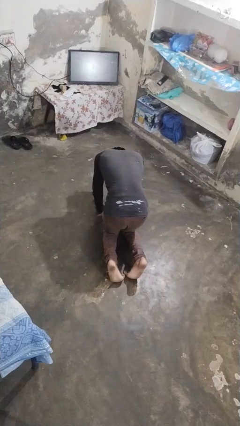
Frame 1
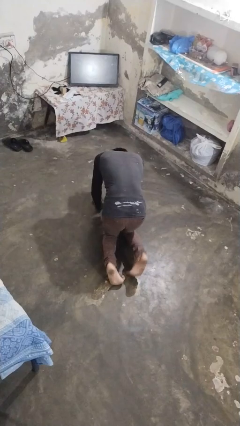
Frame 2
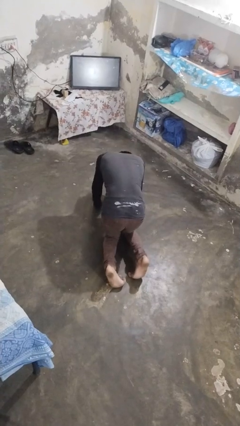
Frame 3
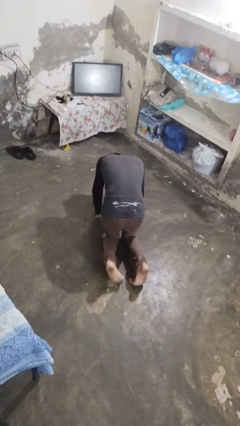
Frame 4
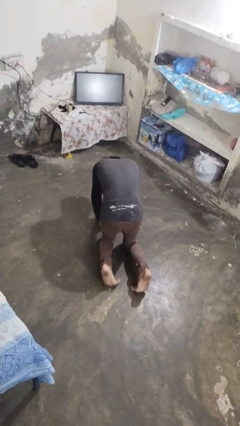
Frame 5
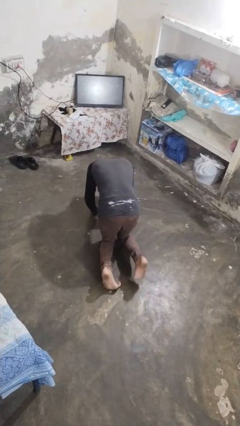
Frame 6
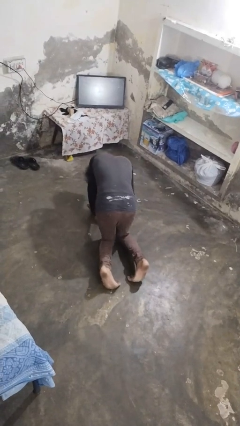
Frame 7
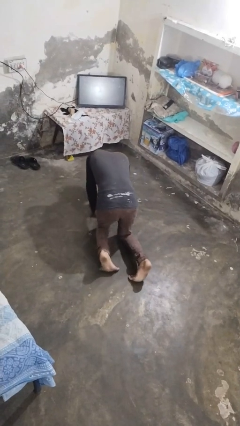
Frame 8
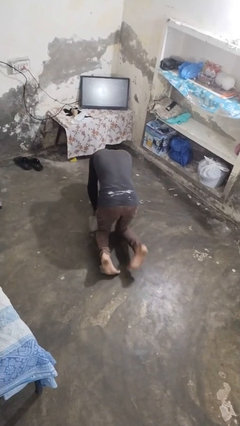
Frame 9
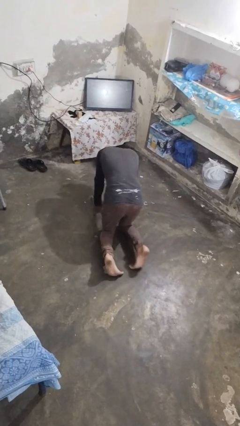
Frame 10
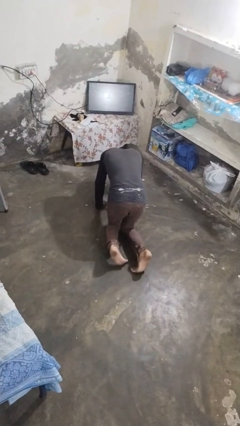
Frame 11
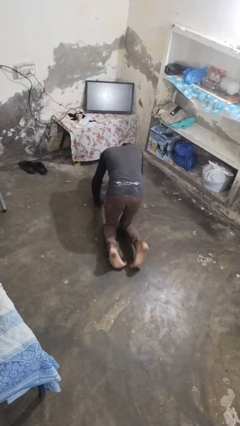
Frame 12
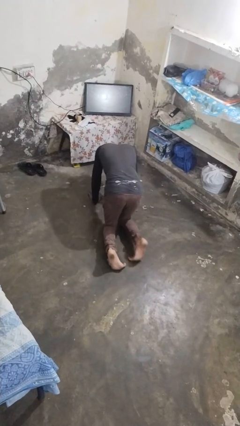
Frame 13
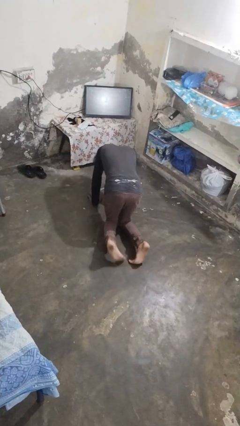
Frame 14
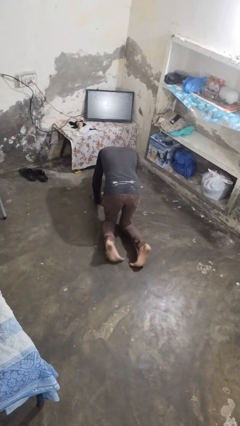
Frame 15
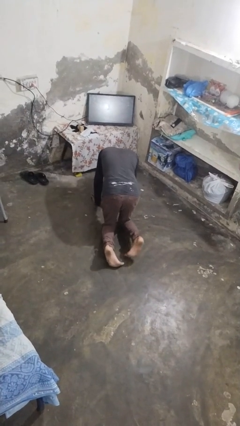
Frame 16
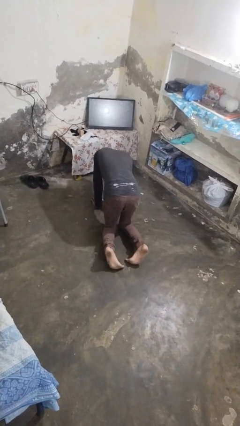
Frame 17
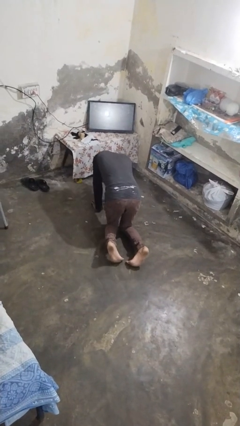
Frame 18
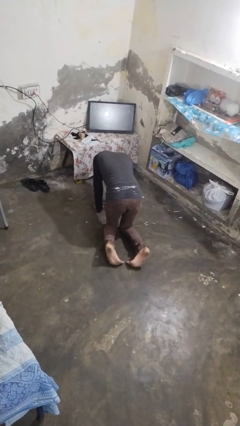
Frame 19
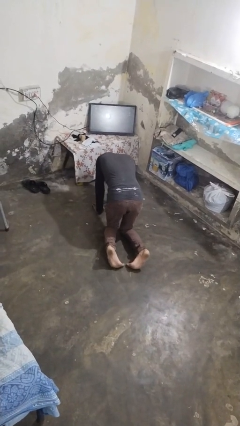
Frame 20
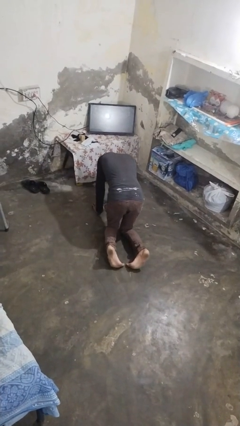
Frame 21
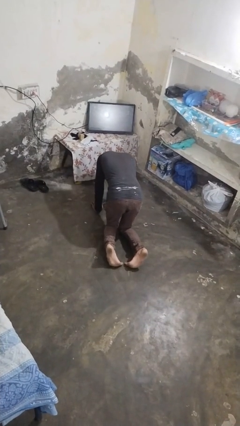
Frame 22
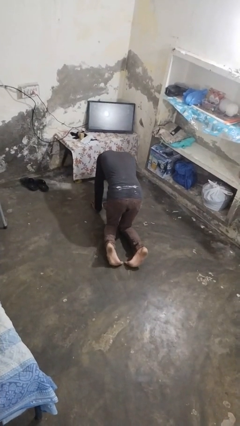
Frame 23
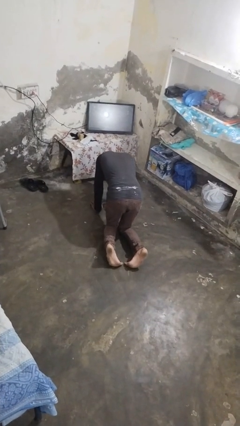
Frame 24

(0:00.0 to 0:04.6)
person crawls

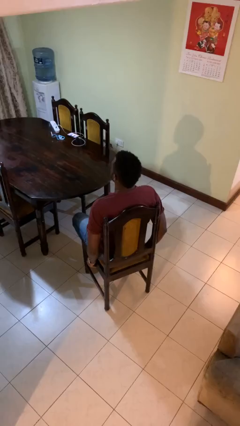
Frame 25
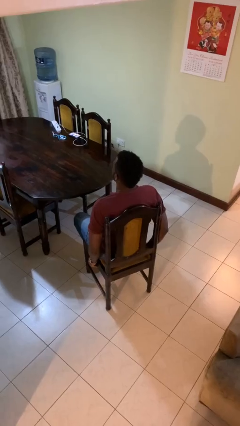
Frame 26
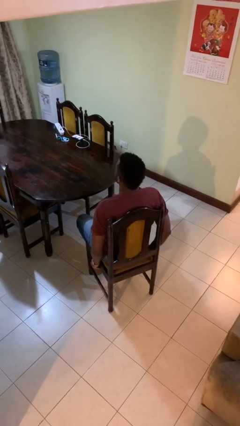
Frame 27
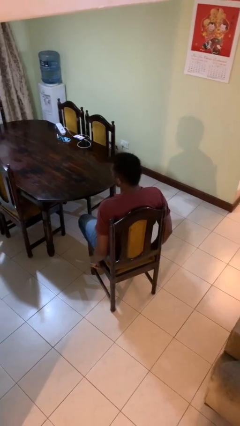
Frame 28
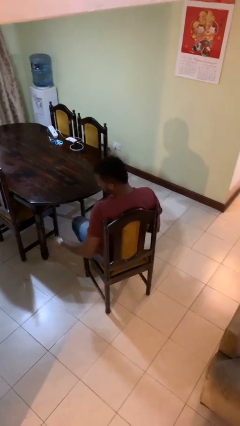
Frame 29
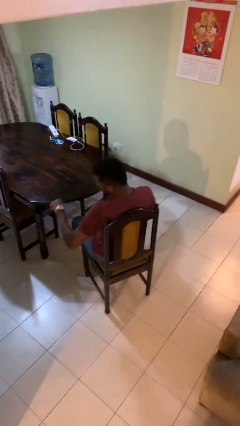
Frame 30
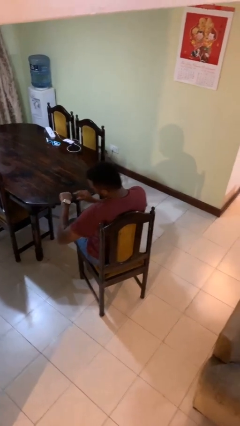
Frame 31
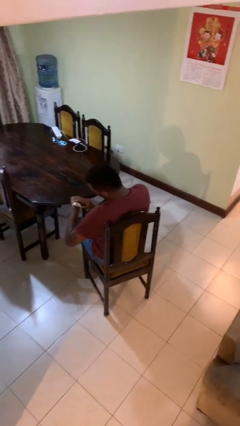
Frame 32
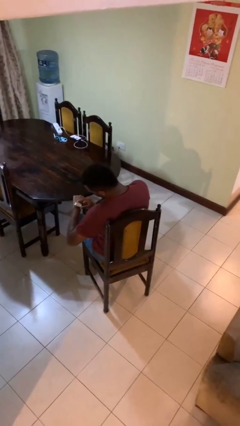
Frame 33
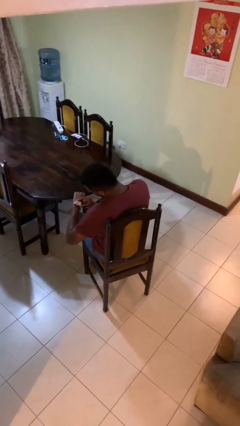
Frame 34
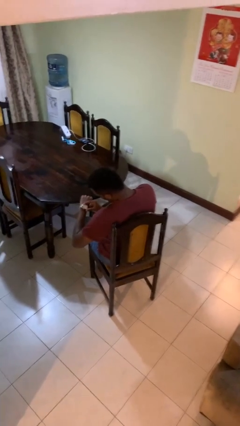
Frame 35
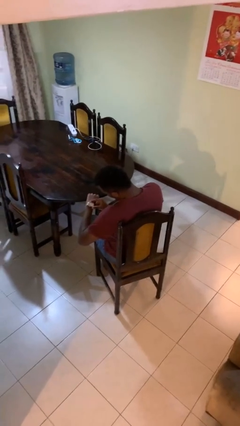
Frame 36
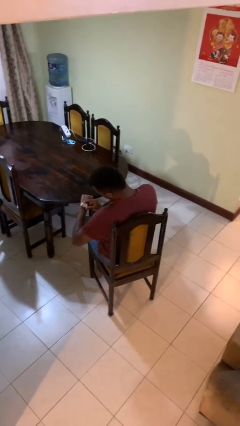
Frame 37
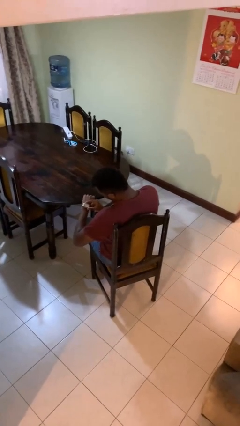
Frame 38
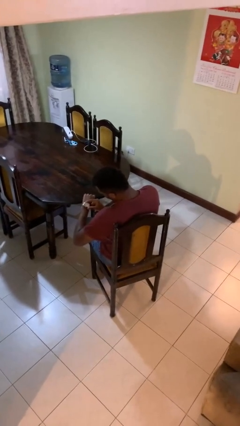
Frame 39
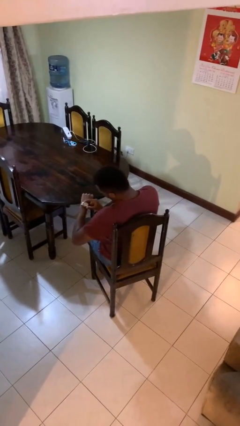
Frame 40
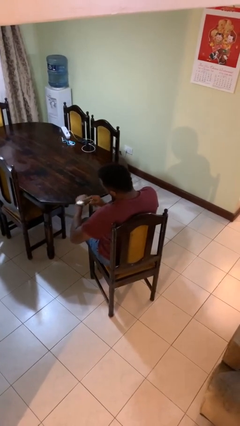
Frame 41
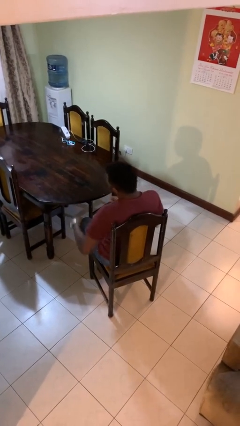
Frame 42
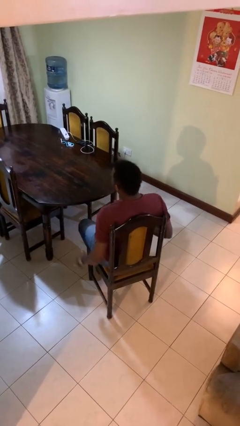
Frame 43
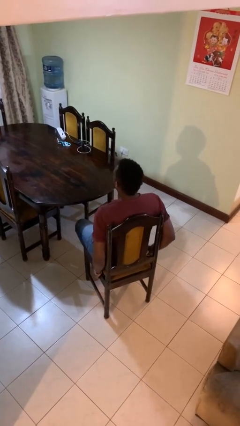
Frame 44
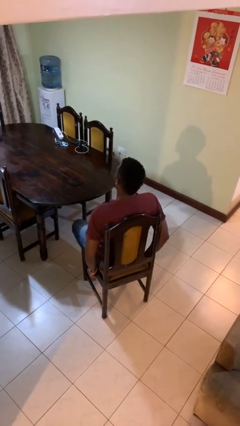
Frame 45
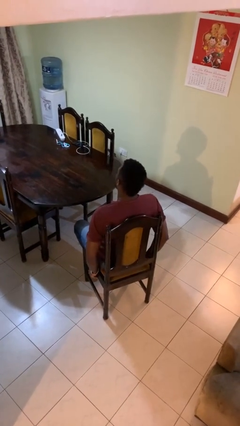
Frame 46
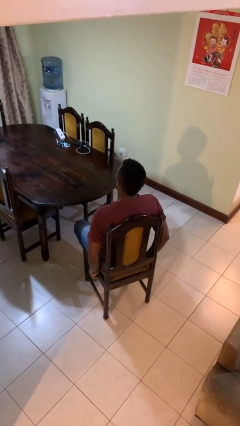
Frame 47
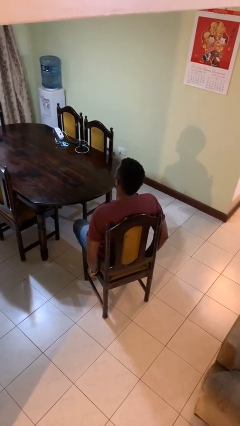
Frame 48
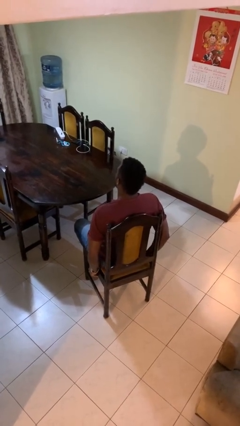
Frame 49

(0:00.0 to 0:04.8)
person looks at wristwatch

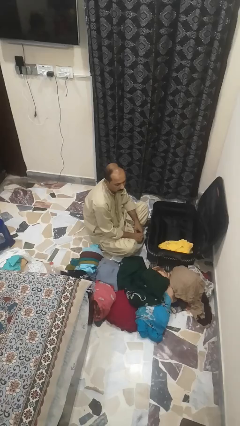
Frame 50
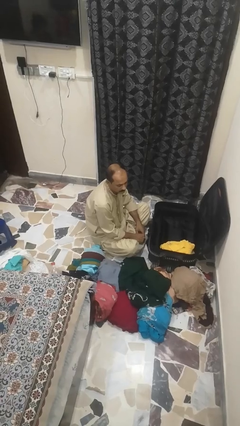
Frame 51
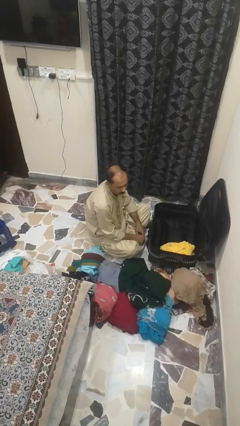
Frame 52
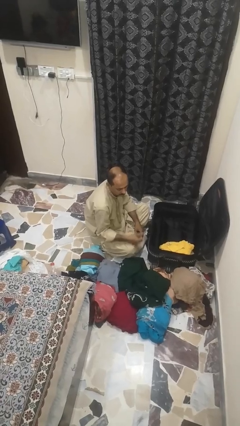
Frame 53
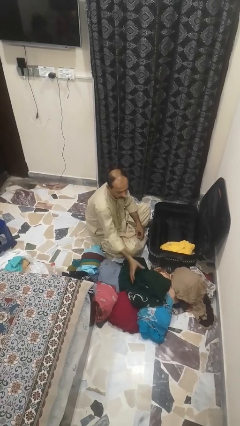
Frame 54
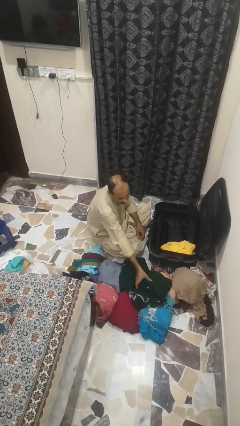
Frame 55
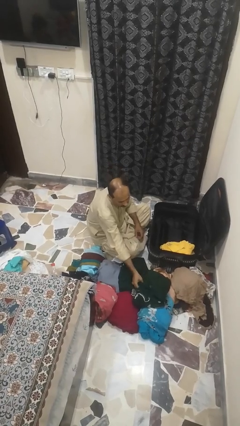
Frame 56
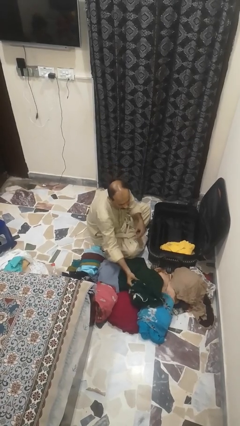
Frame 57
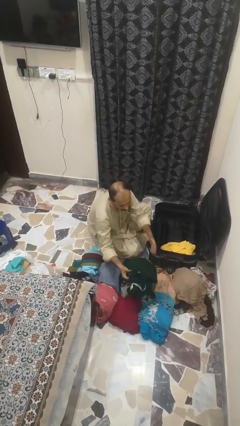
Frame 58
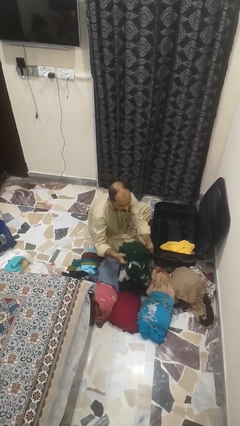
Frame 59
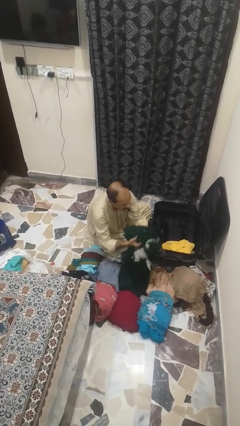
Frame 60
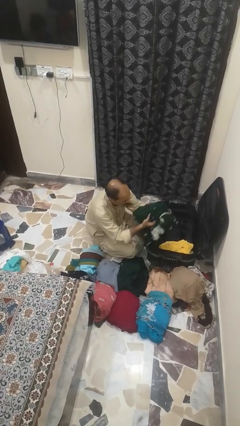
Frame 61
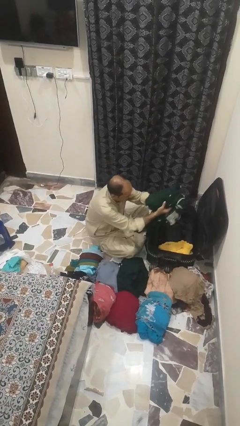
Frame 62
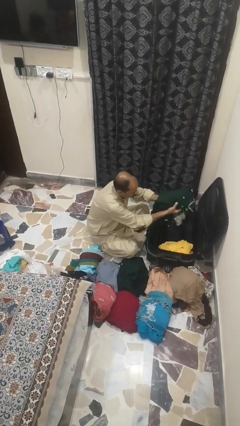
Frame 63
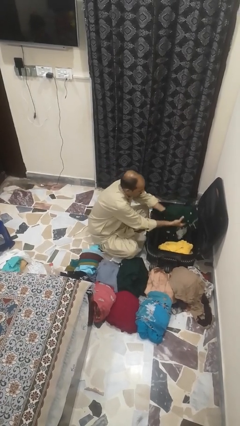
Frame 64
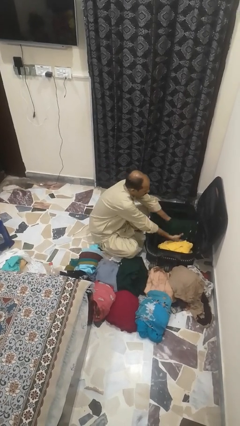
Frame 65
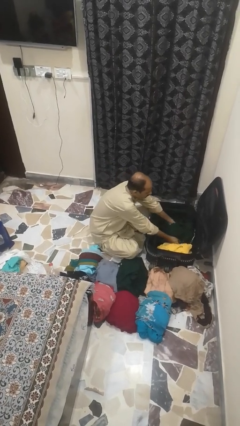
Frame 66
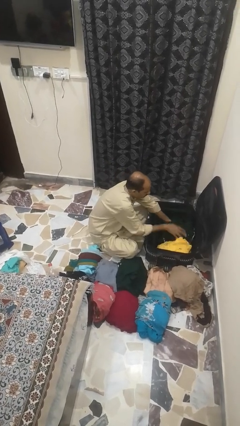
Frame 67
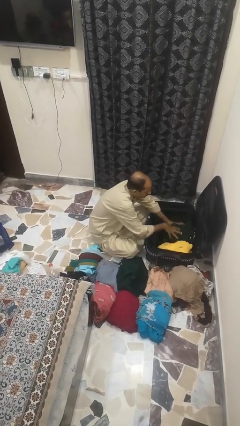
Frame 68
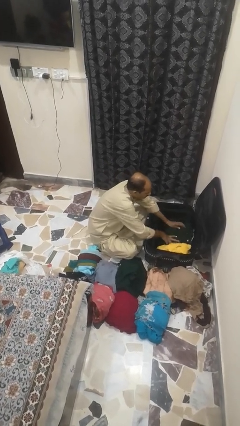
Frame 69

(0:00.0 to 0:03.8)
person loads clothes into suitcase

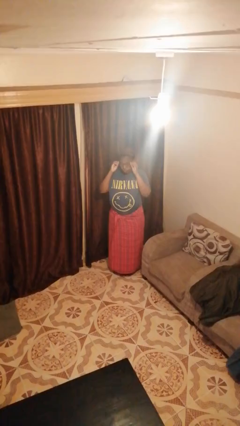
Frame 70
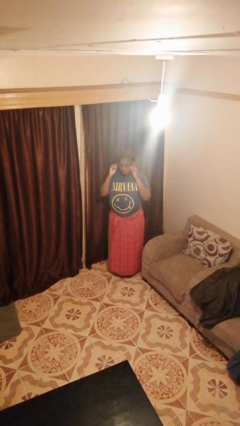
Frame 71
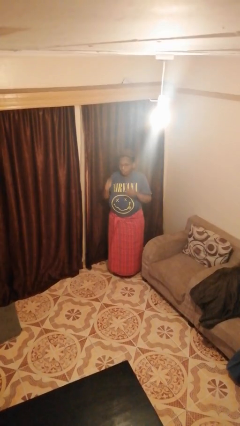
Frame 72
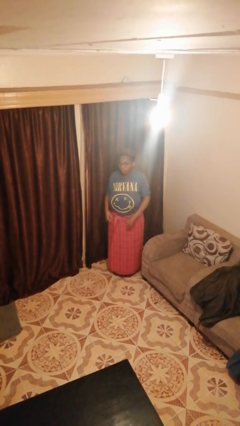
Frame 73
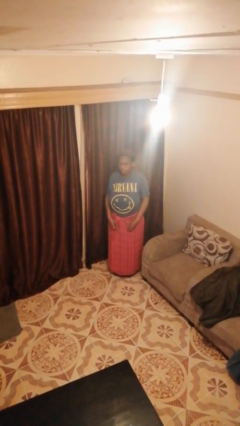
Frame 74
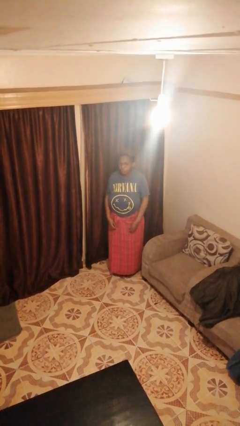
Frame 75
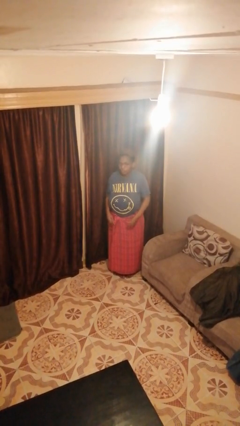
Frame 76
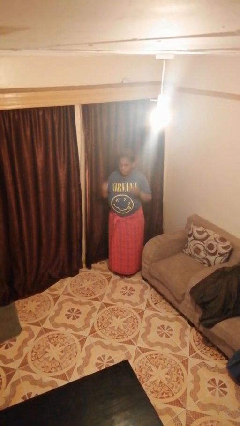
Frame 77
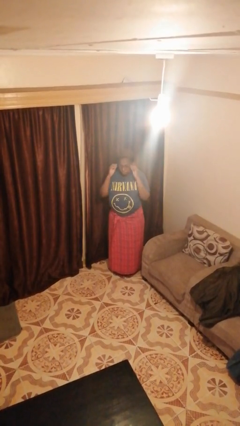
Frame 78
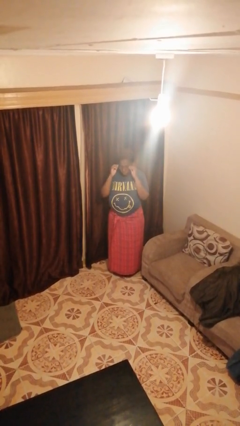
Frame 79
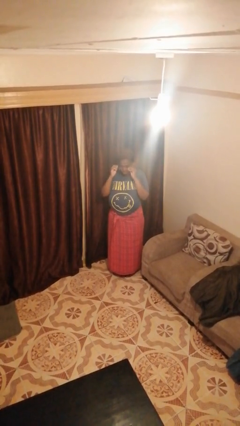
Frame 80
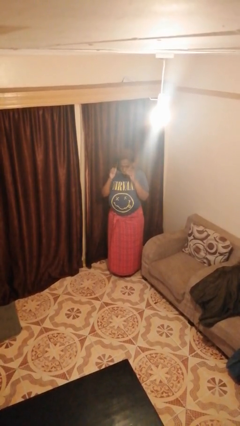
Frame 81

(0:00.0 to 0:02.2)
person takes off glasses

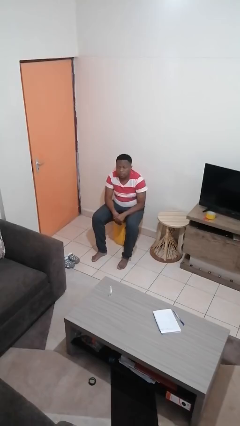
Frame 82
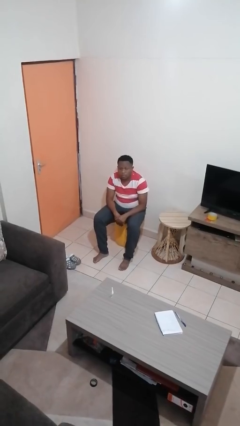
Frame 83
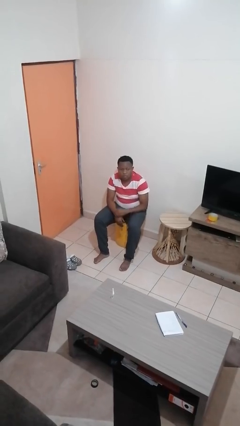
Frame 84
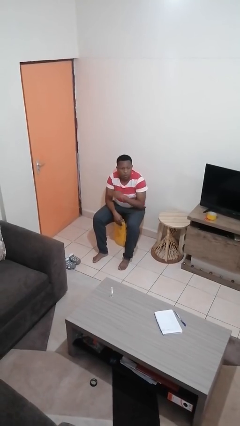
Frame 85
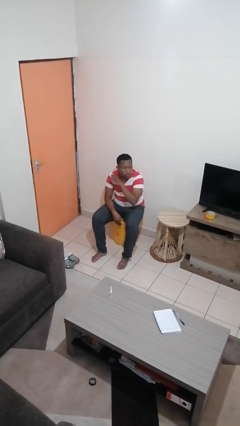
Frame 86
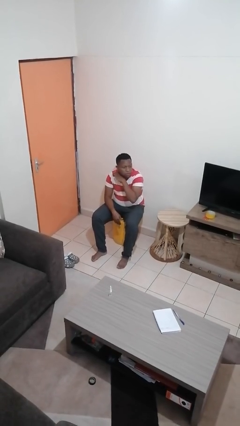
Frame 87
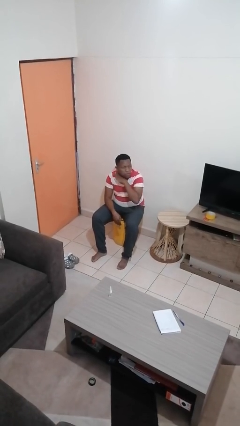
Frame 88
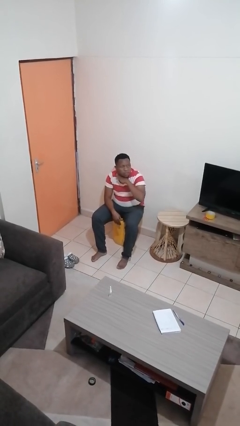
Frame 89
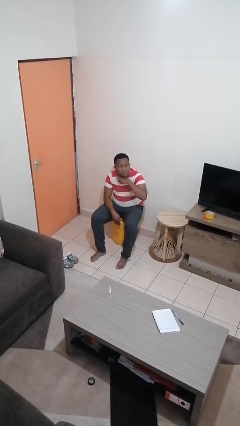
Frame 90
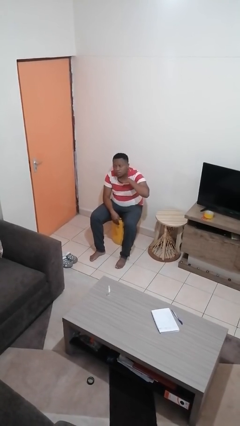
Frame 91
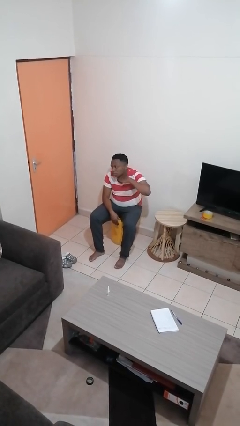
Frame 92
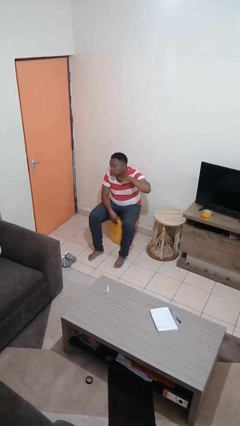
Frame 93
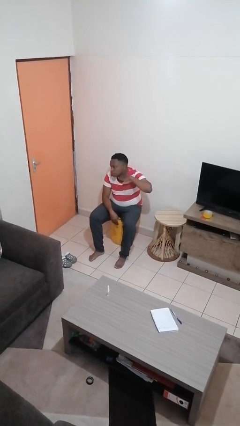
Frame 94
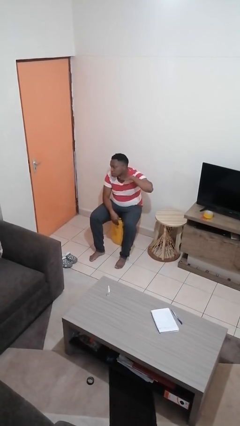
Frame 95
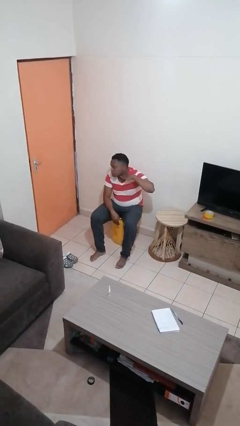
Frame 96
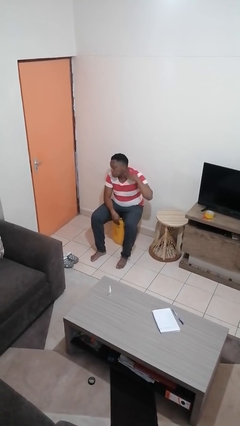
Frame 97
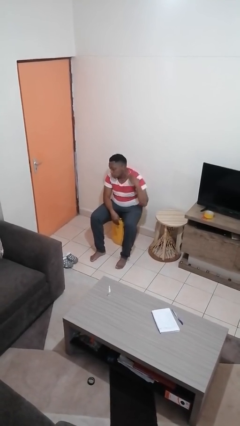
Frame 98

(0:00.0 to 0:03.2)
person gestures cut
